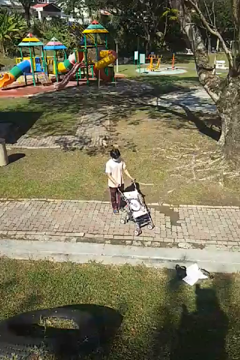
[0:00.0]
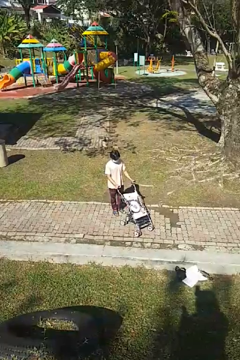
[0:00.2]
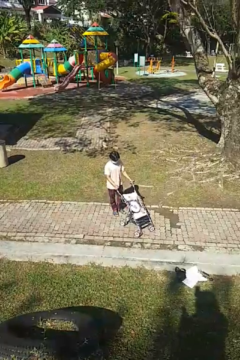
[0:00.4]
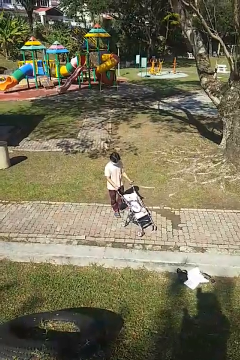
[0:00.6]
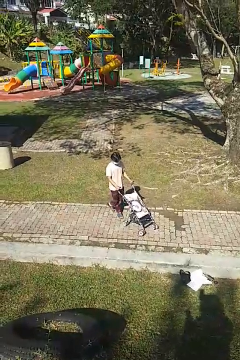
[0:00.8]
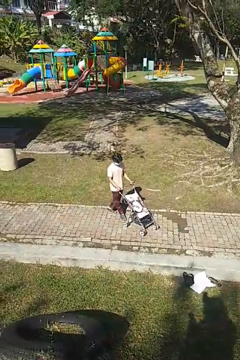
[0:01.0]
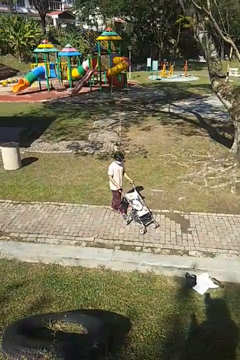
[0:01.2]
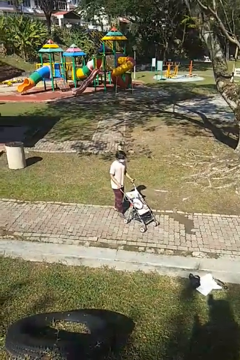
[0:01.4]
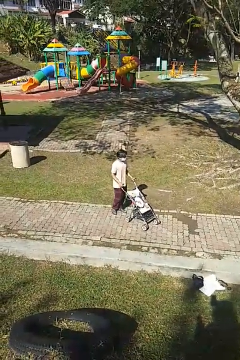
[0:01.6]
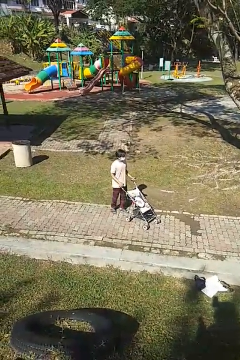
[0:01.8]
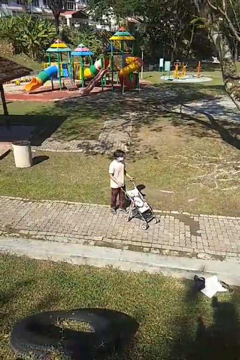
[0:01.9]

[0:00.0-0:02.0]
person pulls wheeled cart

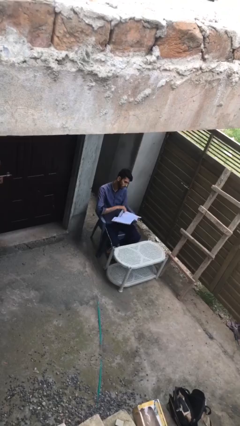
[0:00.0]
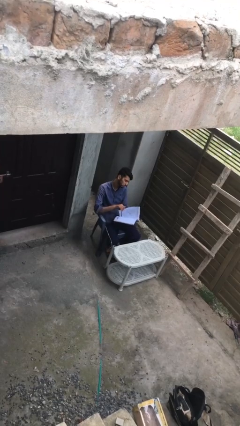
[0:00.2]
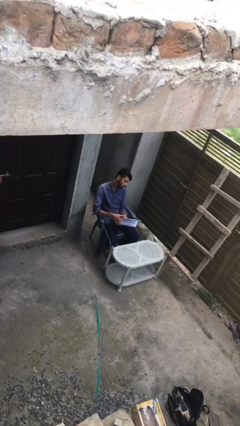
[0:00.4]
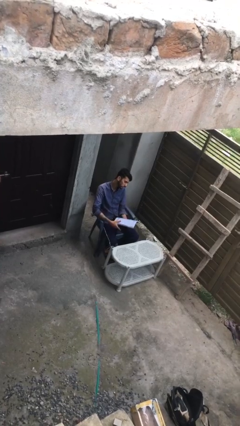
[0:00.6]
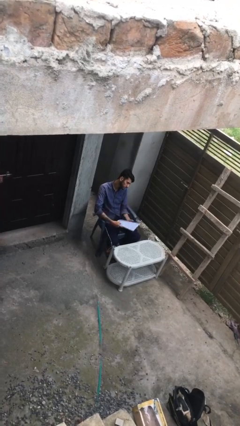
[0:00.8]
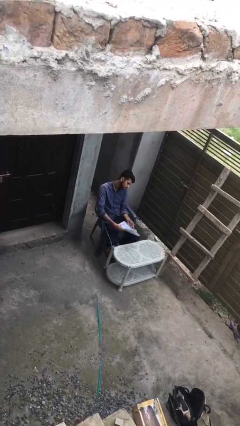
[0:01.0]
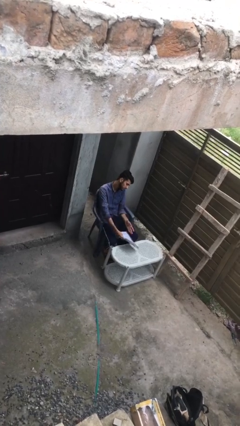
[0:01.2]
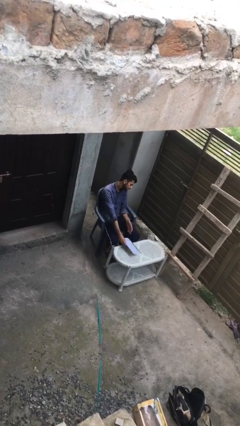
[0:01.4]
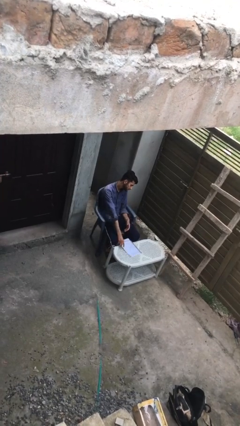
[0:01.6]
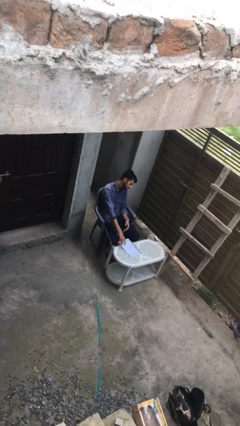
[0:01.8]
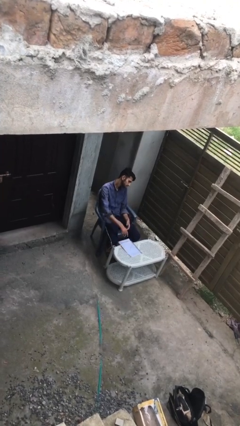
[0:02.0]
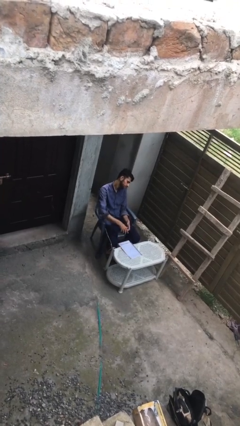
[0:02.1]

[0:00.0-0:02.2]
person puts down object on table

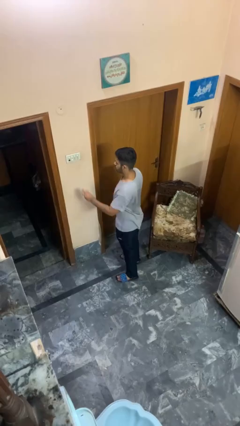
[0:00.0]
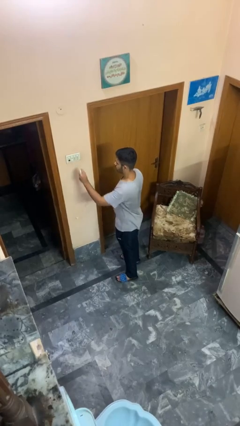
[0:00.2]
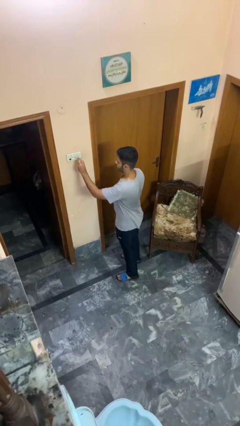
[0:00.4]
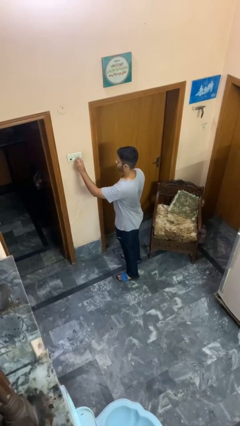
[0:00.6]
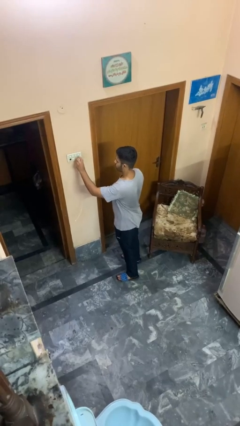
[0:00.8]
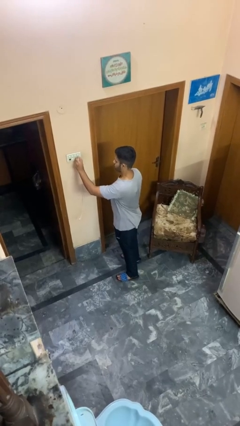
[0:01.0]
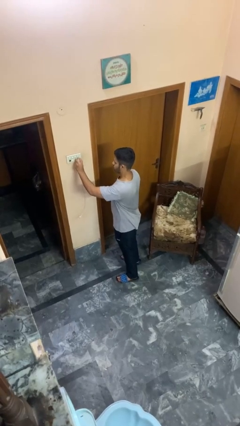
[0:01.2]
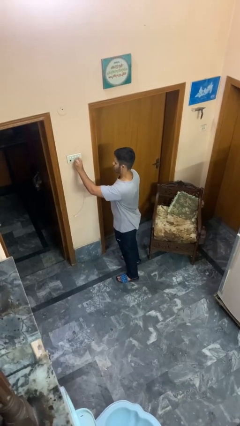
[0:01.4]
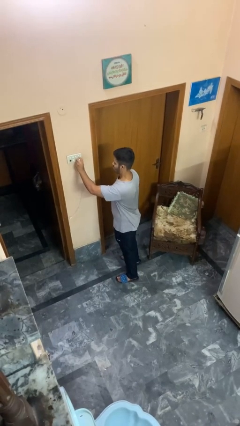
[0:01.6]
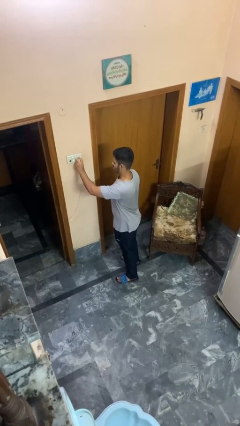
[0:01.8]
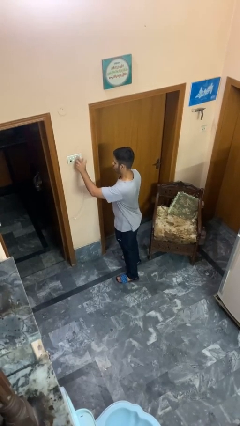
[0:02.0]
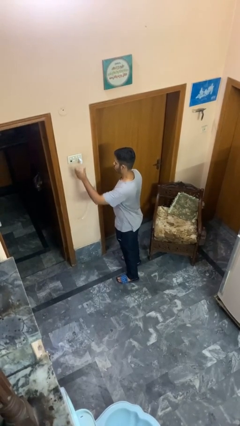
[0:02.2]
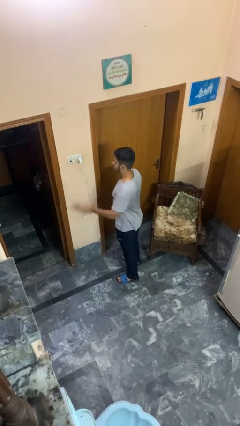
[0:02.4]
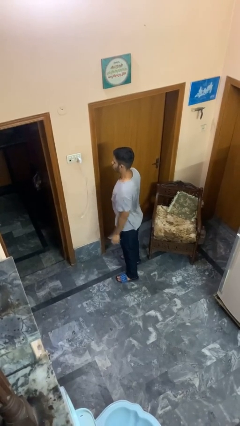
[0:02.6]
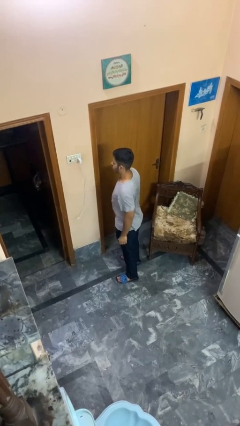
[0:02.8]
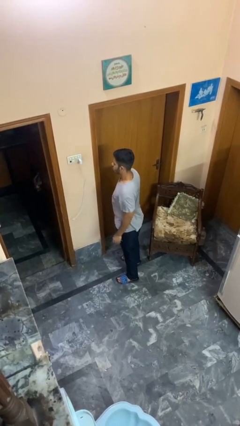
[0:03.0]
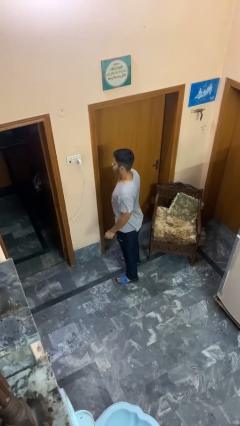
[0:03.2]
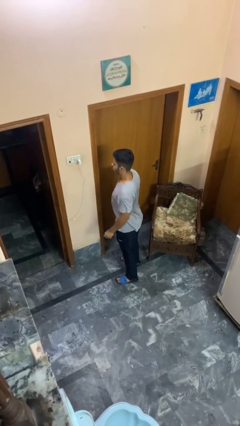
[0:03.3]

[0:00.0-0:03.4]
person plugs into electrical socket

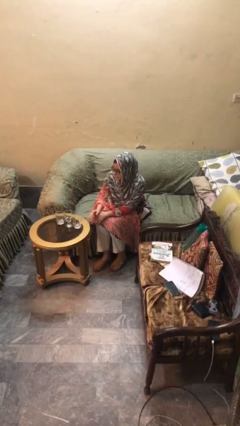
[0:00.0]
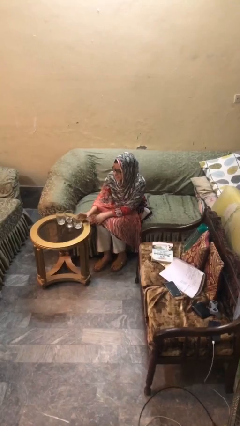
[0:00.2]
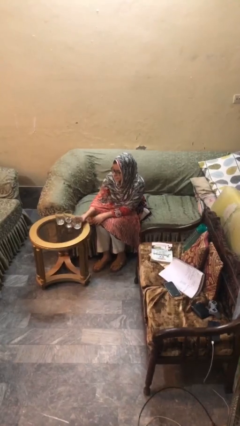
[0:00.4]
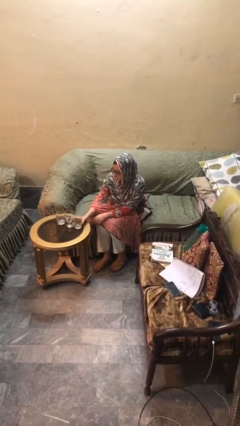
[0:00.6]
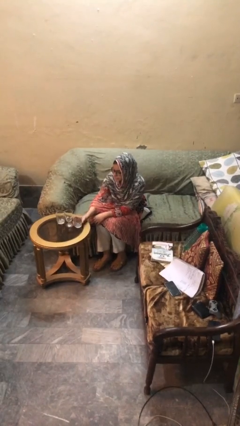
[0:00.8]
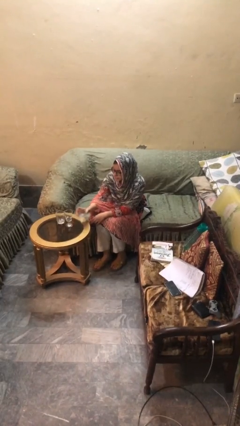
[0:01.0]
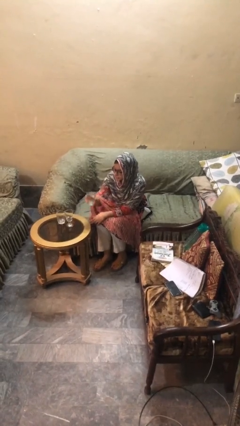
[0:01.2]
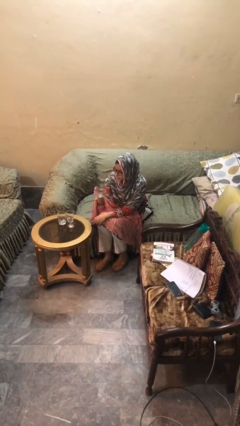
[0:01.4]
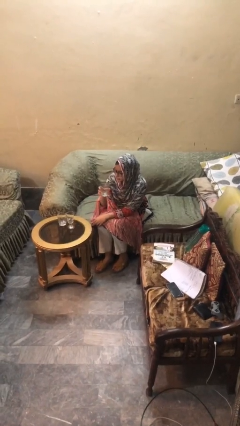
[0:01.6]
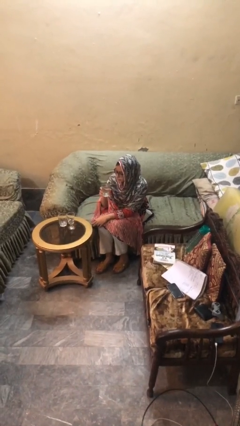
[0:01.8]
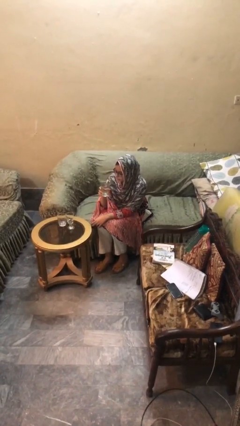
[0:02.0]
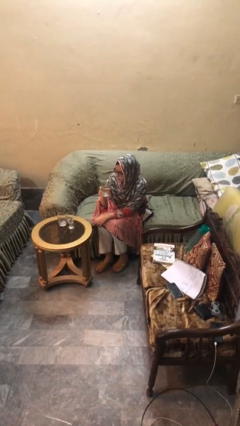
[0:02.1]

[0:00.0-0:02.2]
person picks up object from table

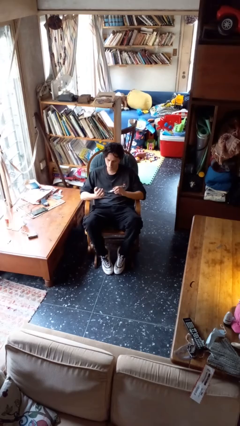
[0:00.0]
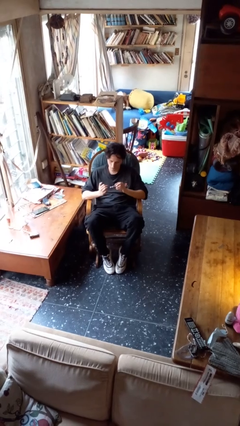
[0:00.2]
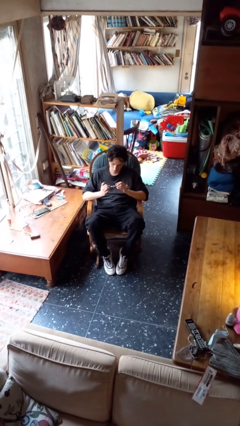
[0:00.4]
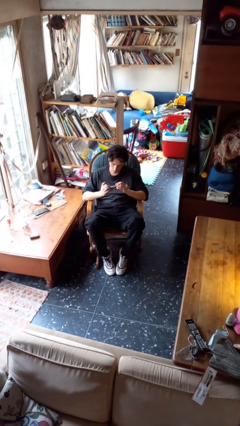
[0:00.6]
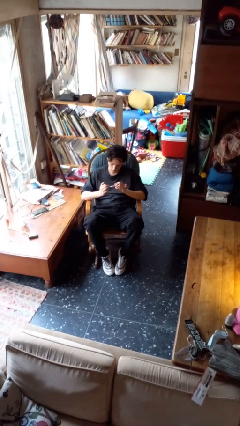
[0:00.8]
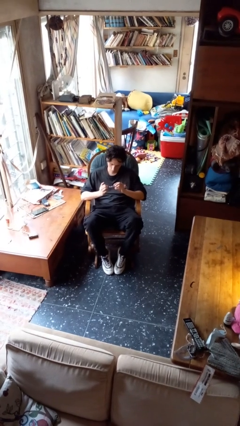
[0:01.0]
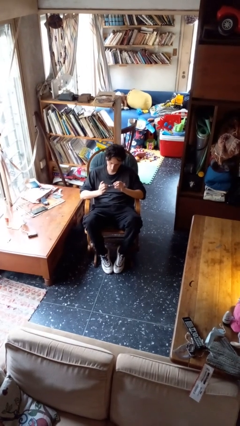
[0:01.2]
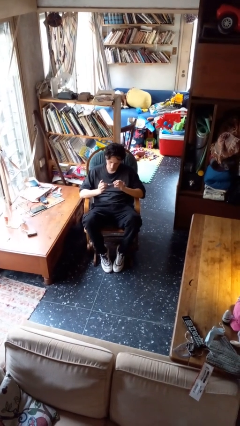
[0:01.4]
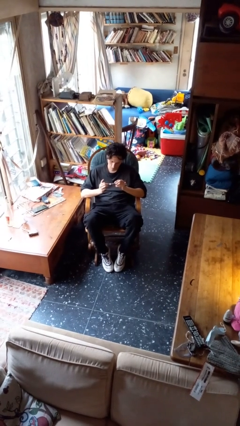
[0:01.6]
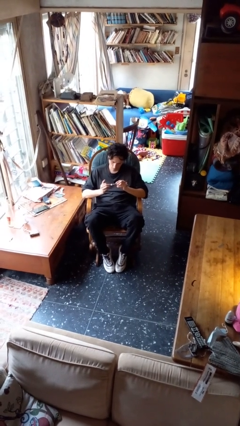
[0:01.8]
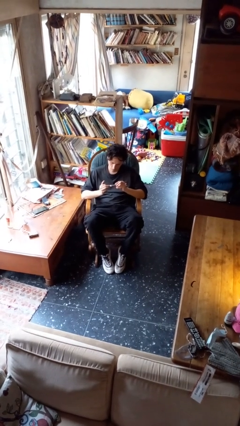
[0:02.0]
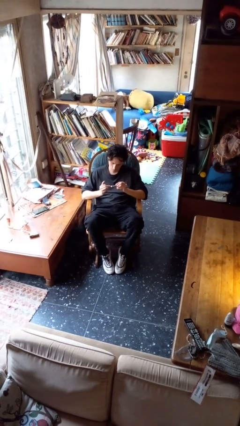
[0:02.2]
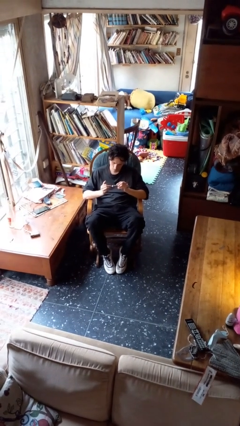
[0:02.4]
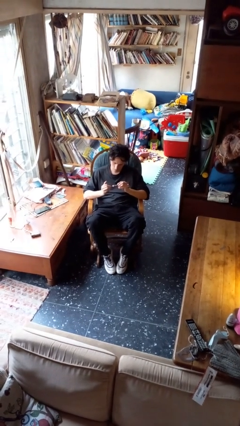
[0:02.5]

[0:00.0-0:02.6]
person clips fingernails

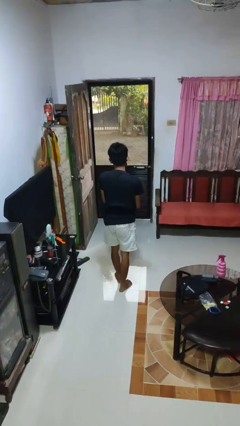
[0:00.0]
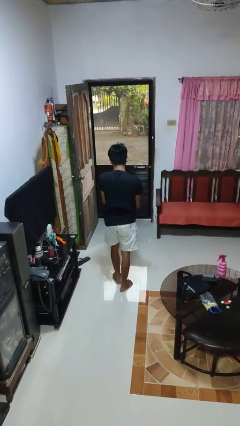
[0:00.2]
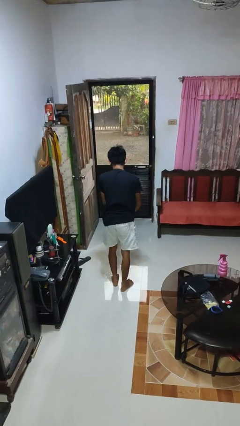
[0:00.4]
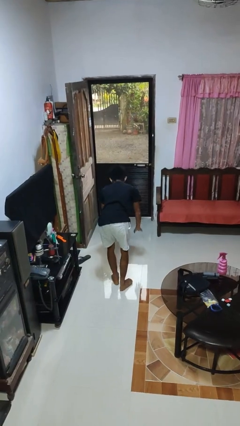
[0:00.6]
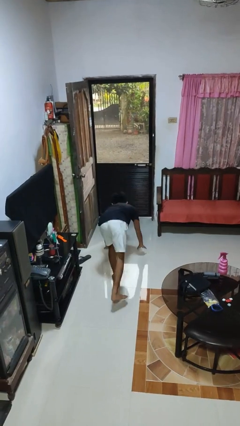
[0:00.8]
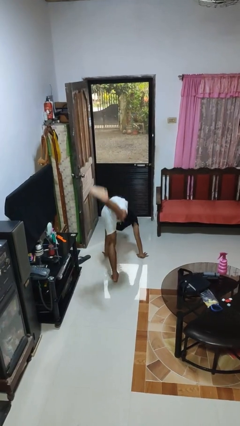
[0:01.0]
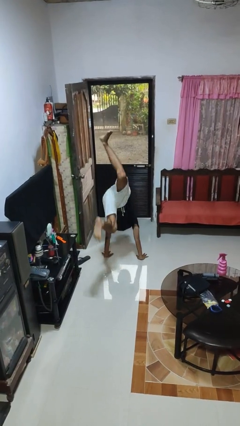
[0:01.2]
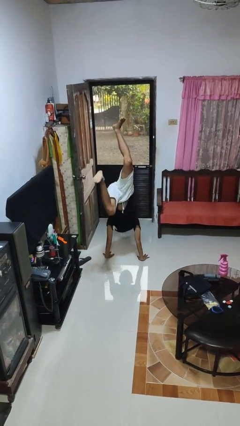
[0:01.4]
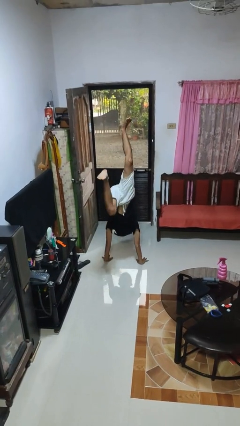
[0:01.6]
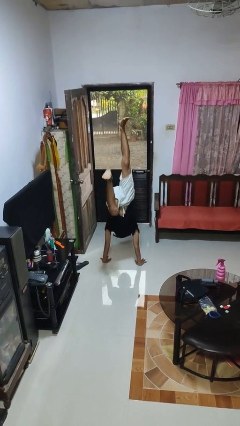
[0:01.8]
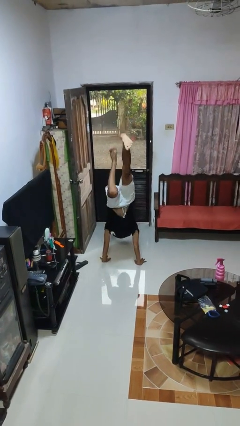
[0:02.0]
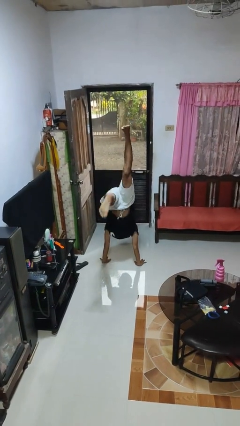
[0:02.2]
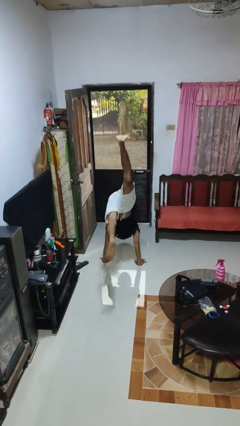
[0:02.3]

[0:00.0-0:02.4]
person handstand

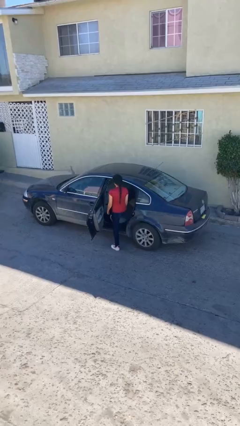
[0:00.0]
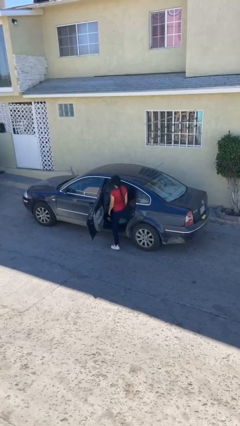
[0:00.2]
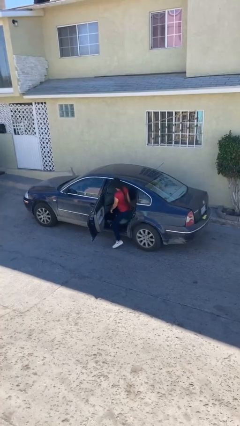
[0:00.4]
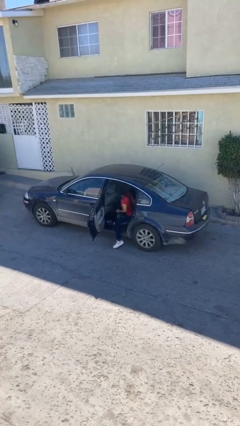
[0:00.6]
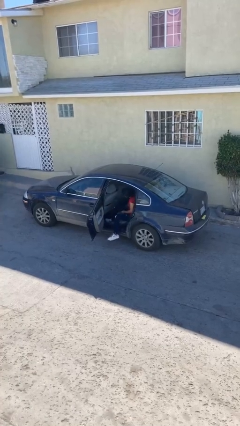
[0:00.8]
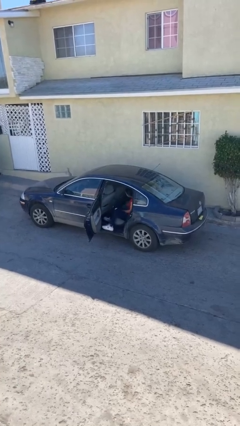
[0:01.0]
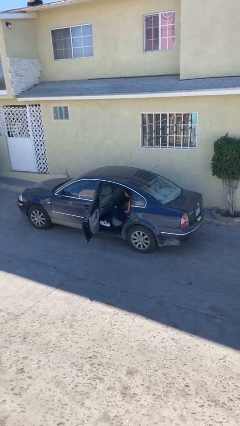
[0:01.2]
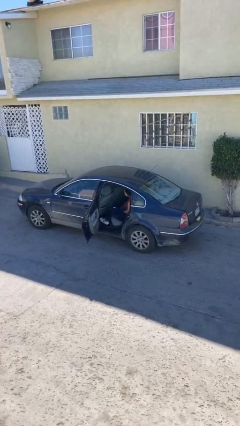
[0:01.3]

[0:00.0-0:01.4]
person enters car

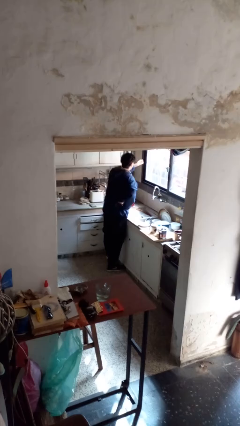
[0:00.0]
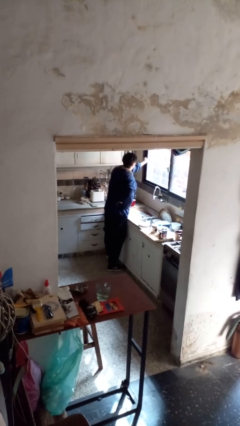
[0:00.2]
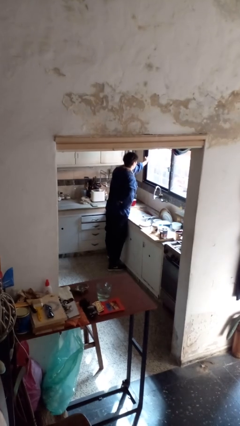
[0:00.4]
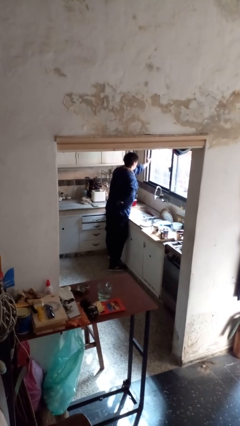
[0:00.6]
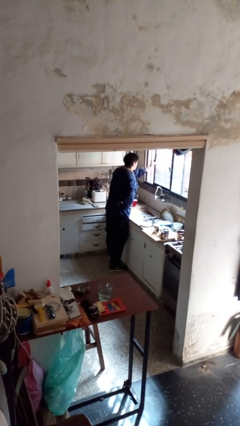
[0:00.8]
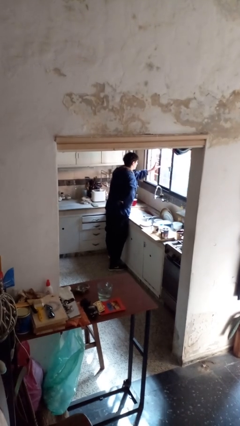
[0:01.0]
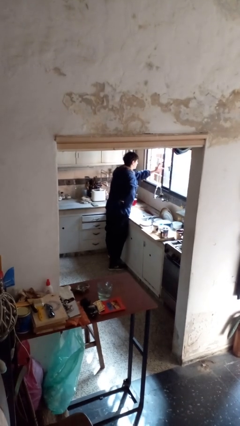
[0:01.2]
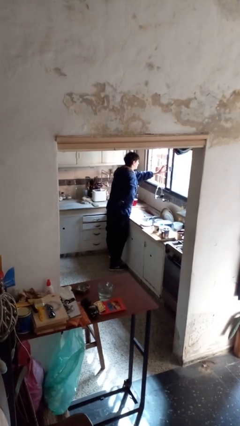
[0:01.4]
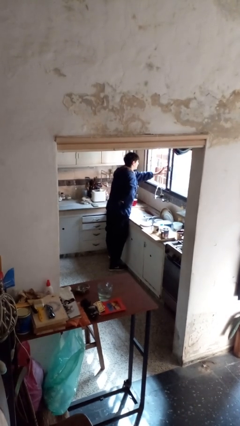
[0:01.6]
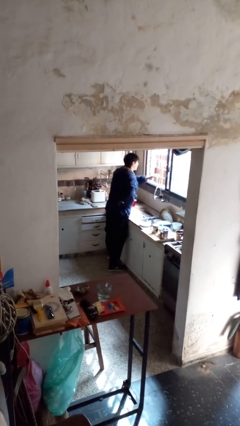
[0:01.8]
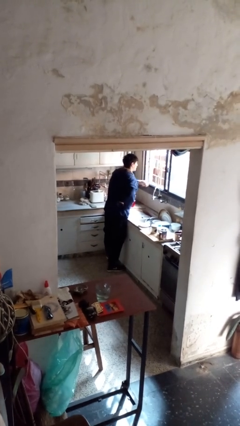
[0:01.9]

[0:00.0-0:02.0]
person opens home window
